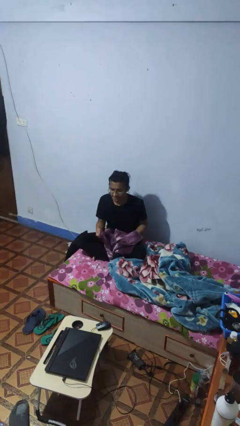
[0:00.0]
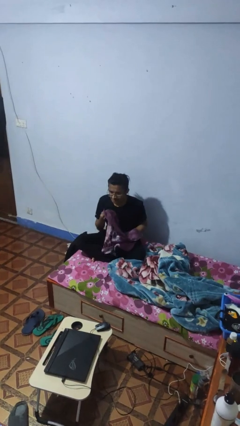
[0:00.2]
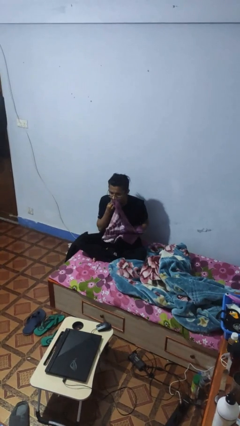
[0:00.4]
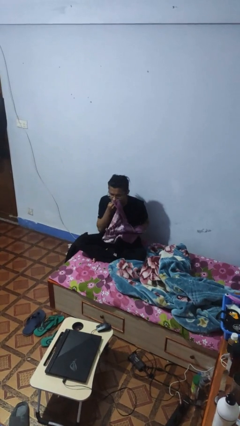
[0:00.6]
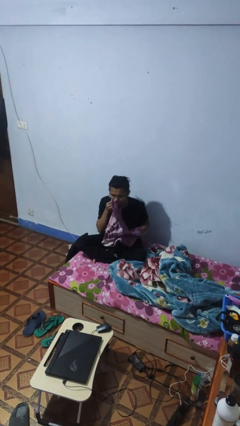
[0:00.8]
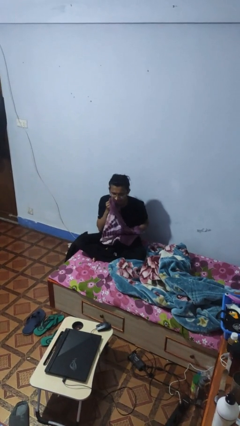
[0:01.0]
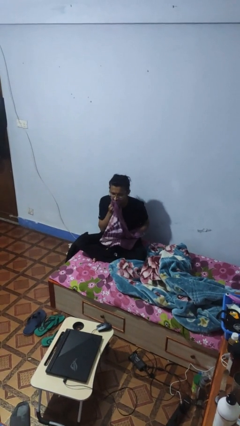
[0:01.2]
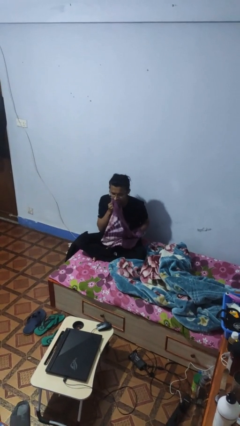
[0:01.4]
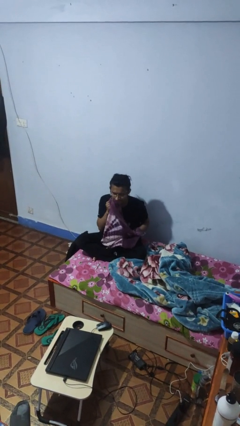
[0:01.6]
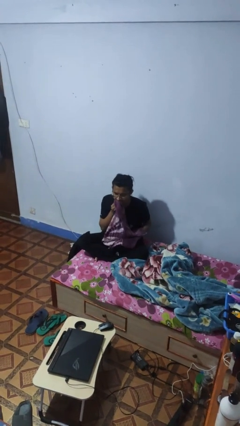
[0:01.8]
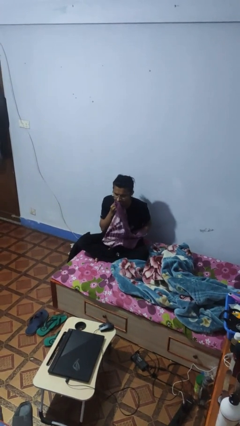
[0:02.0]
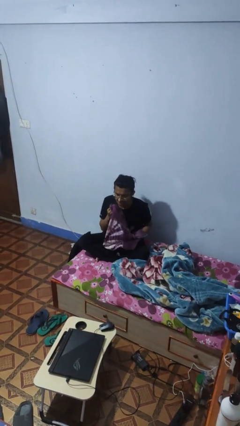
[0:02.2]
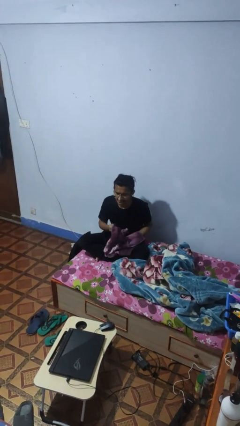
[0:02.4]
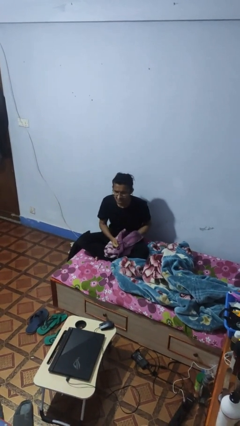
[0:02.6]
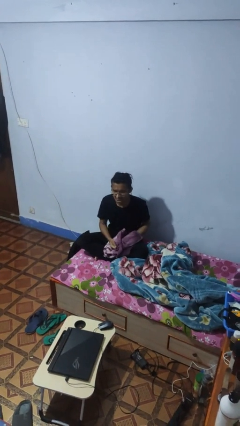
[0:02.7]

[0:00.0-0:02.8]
person wipes mouth with napkin

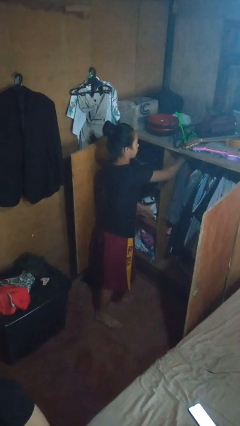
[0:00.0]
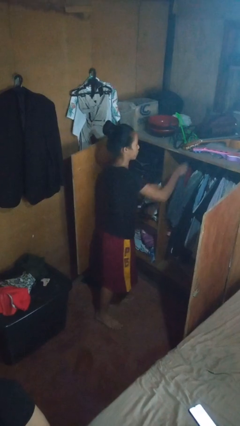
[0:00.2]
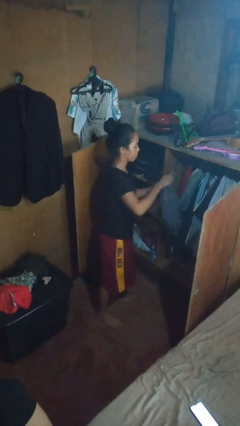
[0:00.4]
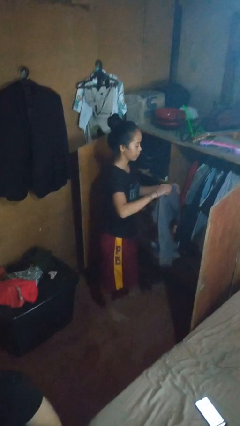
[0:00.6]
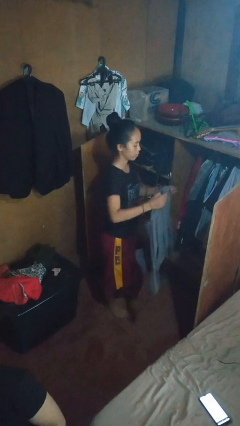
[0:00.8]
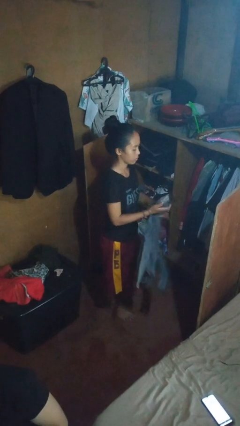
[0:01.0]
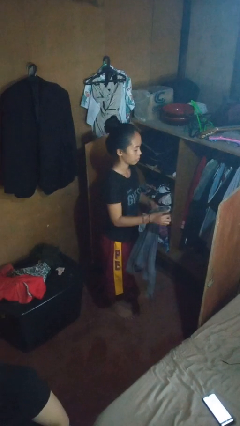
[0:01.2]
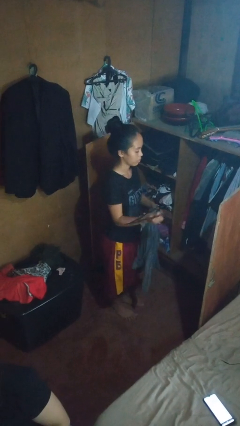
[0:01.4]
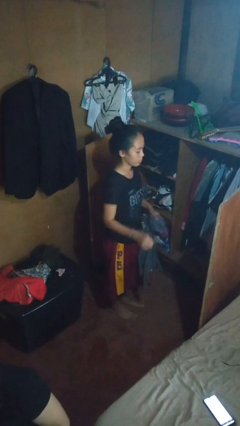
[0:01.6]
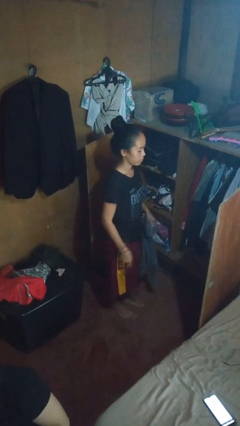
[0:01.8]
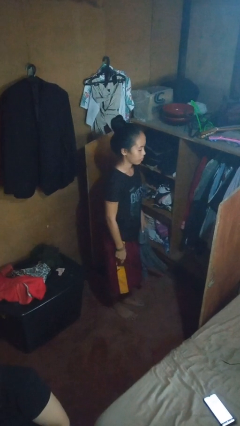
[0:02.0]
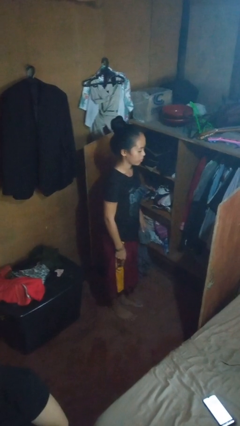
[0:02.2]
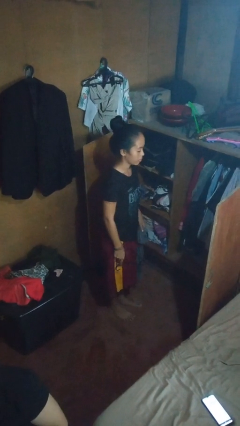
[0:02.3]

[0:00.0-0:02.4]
person takes clothes from closet

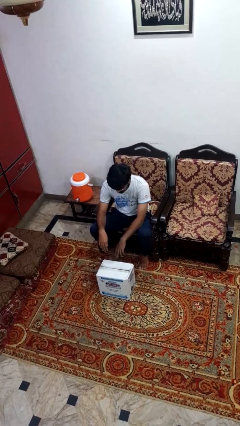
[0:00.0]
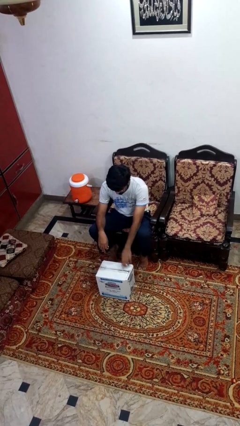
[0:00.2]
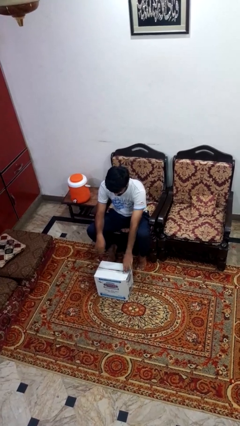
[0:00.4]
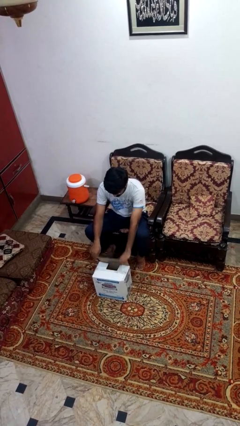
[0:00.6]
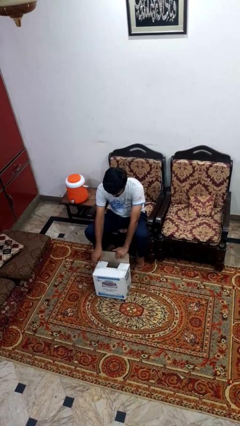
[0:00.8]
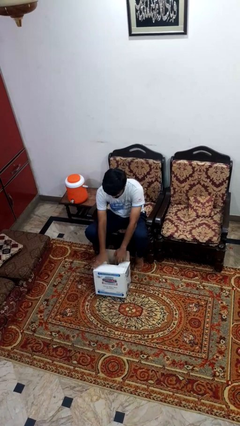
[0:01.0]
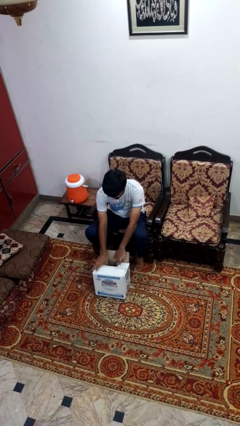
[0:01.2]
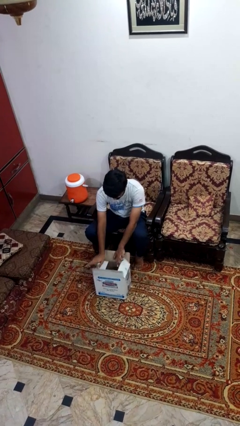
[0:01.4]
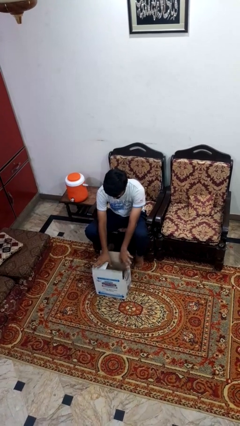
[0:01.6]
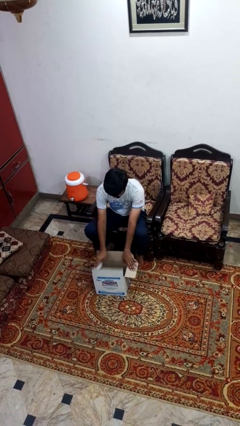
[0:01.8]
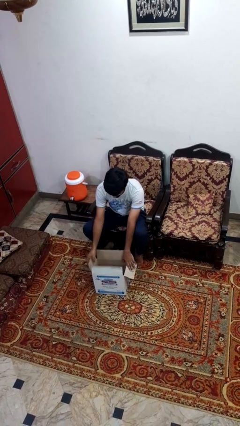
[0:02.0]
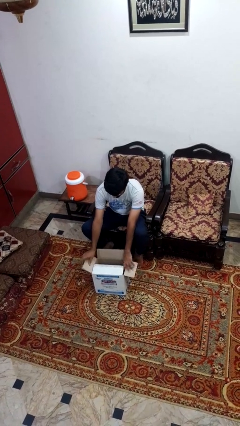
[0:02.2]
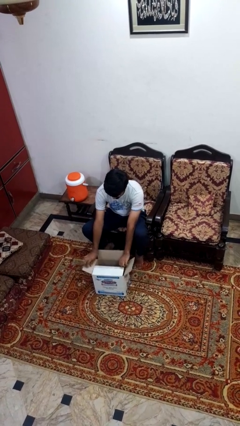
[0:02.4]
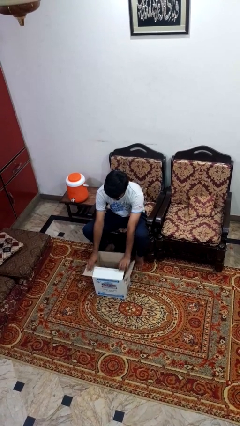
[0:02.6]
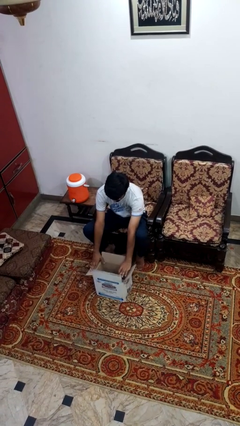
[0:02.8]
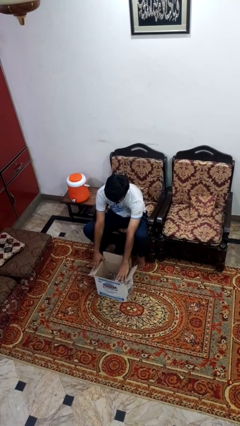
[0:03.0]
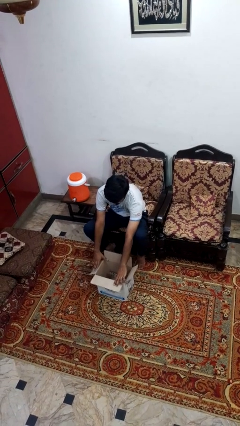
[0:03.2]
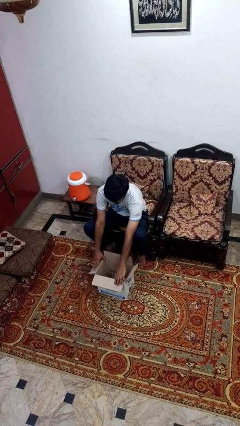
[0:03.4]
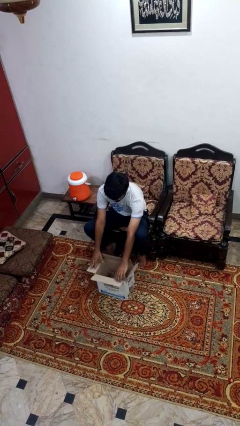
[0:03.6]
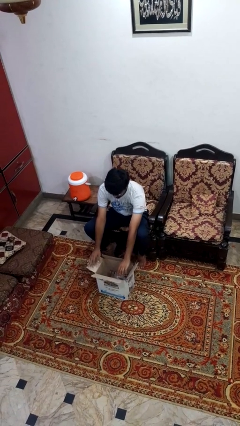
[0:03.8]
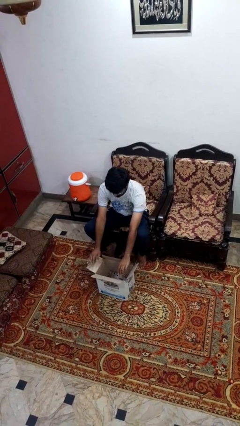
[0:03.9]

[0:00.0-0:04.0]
person opens box

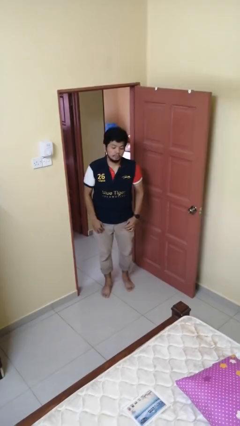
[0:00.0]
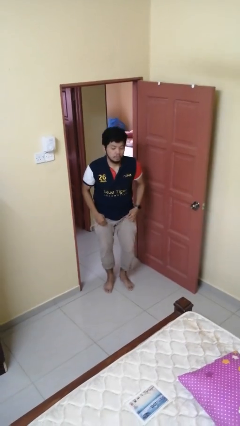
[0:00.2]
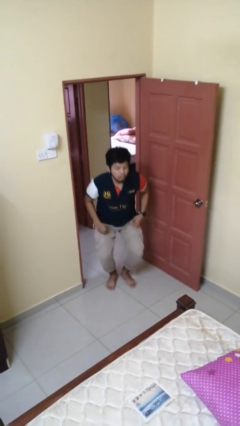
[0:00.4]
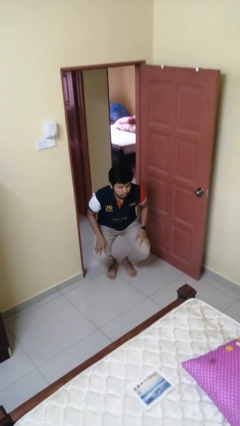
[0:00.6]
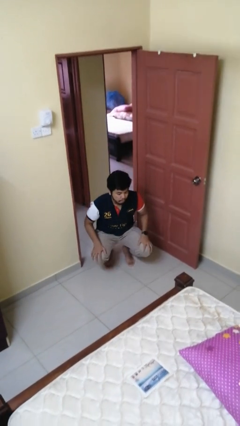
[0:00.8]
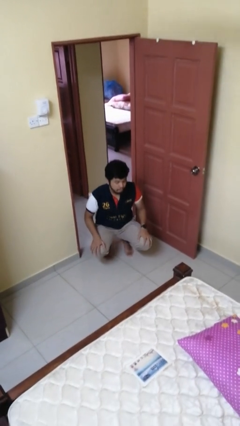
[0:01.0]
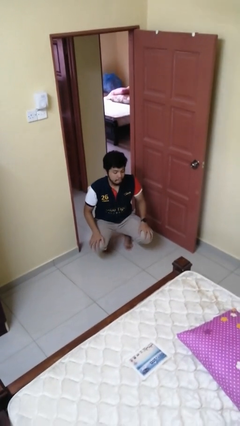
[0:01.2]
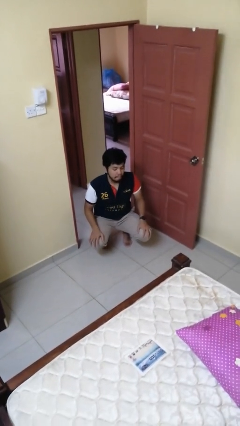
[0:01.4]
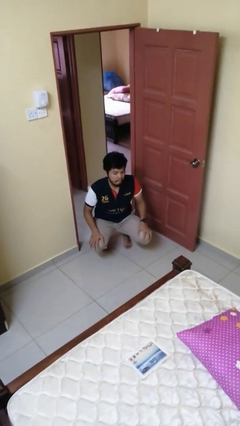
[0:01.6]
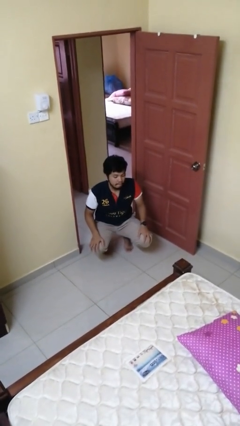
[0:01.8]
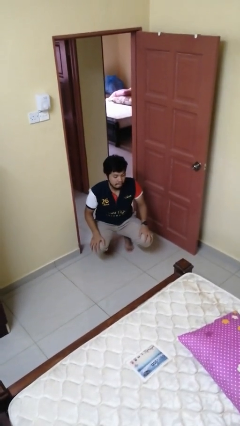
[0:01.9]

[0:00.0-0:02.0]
person squats

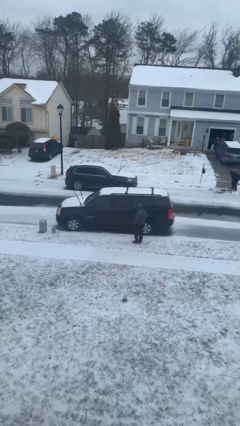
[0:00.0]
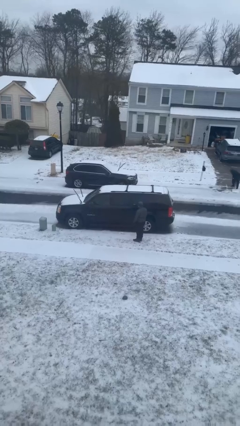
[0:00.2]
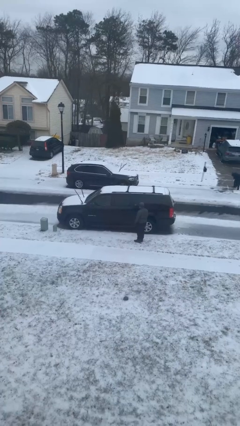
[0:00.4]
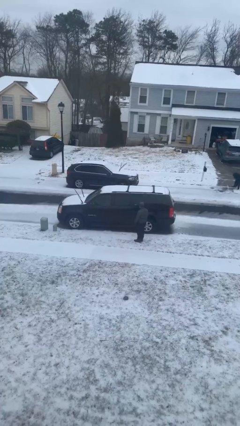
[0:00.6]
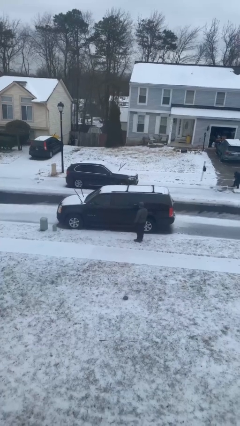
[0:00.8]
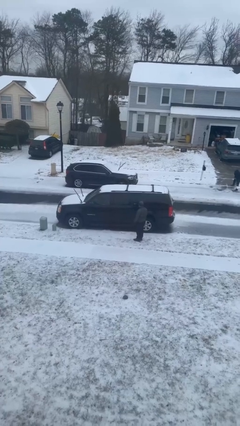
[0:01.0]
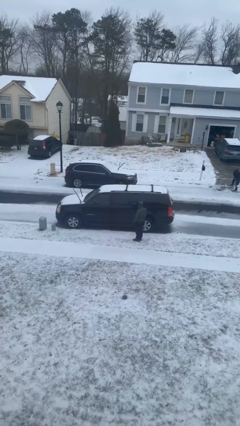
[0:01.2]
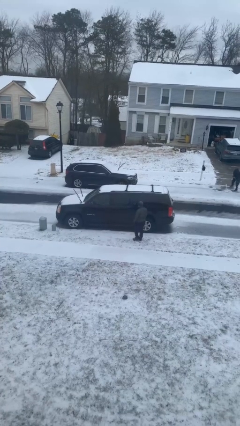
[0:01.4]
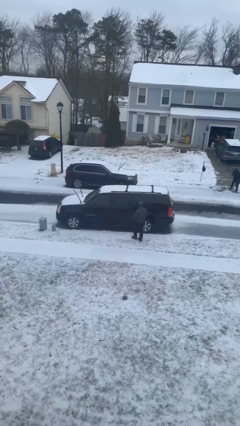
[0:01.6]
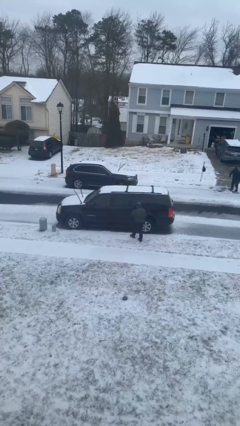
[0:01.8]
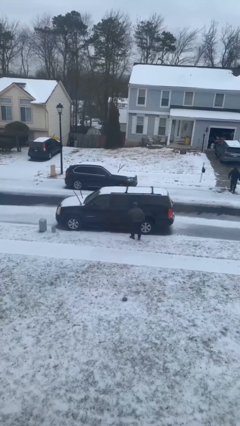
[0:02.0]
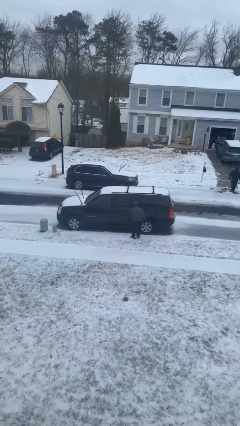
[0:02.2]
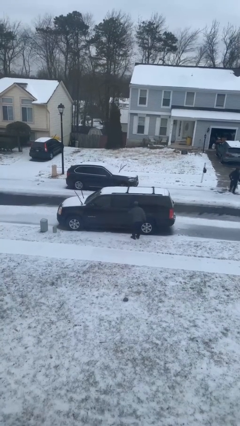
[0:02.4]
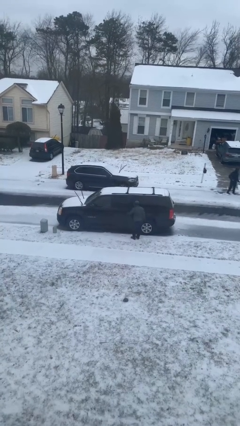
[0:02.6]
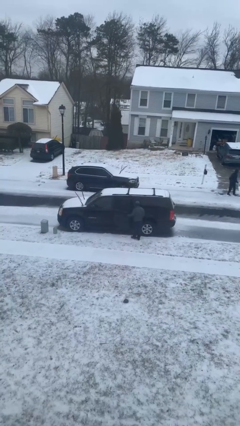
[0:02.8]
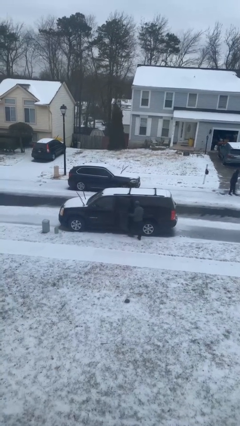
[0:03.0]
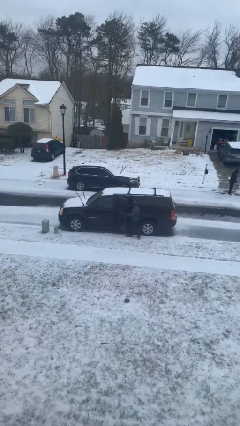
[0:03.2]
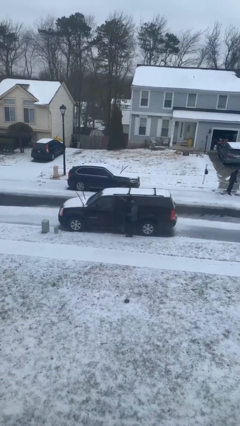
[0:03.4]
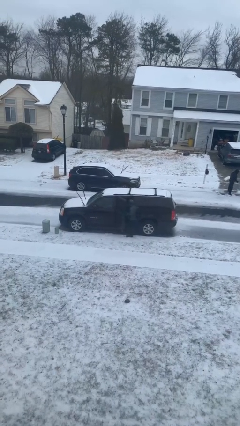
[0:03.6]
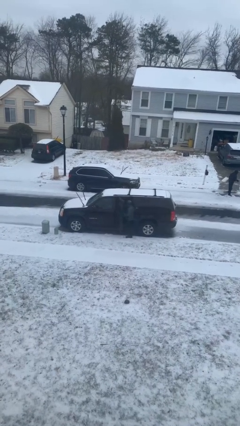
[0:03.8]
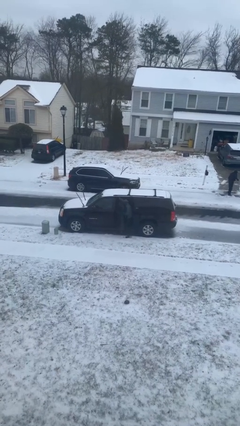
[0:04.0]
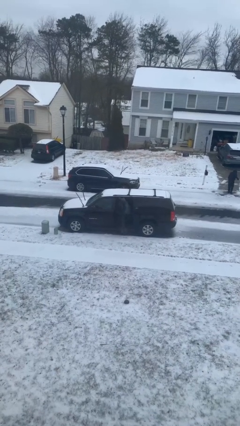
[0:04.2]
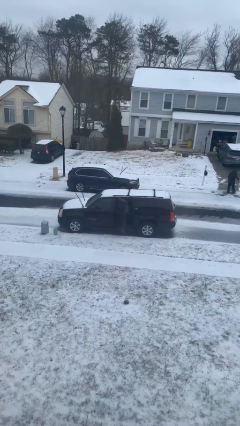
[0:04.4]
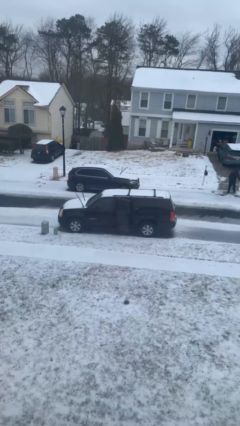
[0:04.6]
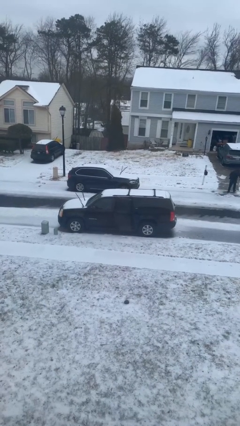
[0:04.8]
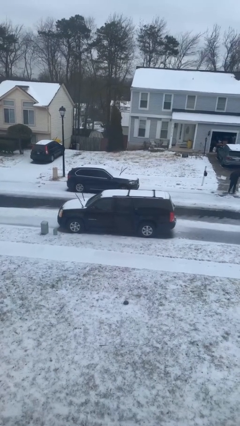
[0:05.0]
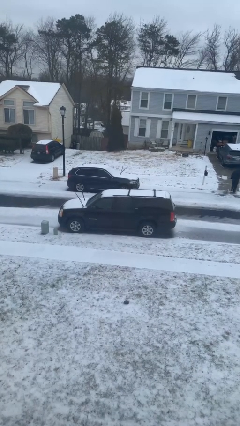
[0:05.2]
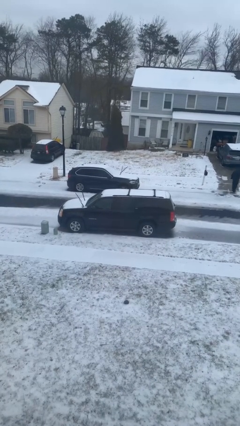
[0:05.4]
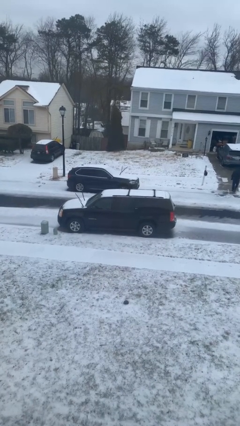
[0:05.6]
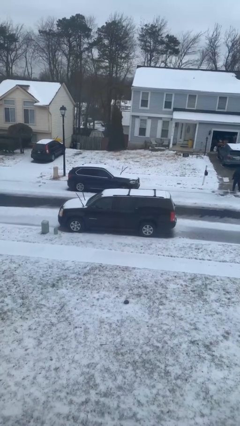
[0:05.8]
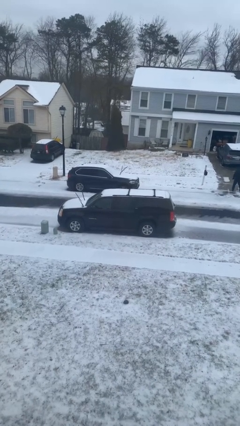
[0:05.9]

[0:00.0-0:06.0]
car picks up person
